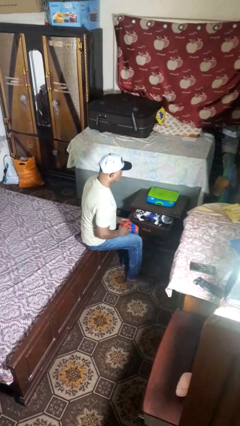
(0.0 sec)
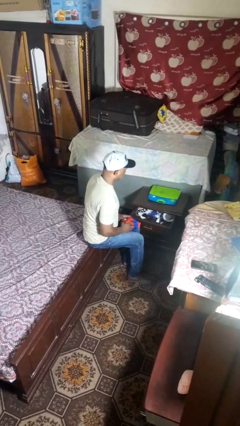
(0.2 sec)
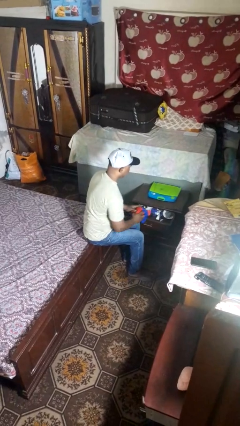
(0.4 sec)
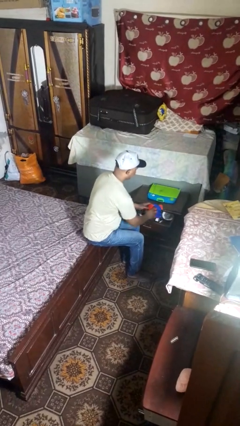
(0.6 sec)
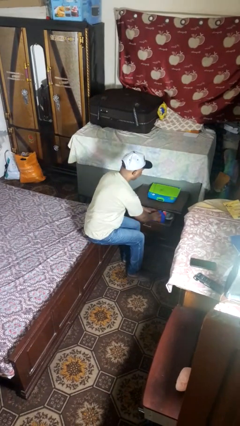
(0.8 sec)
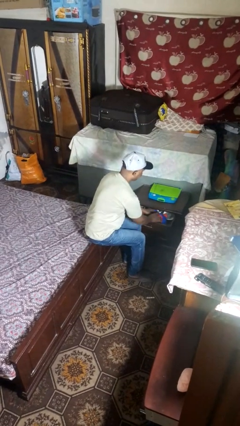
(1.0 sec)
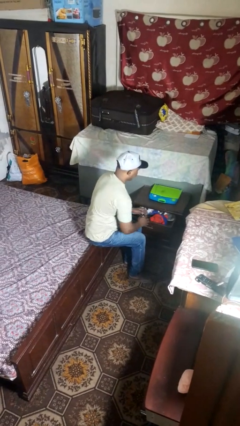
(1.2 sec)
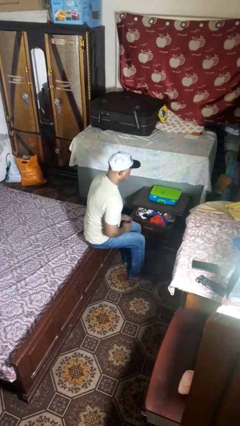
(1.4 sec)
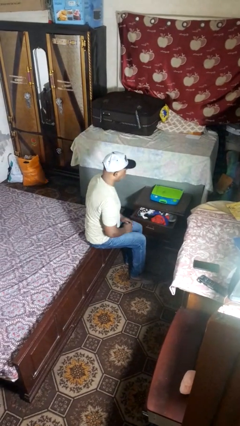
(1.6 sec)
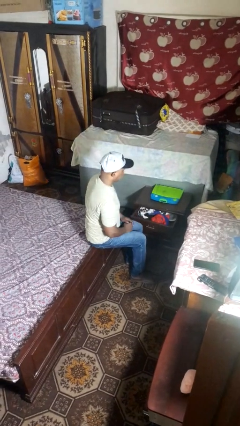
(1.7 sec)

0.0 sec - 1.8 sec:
person puts clothes into dresser

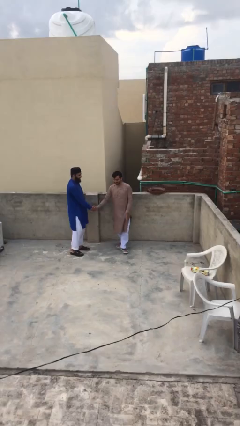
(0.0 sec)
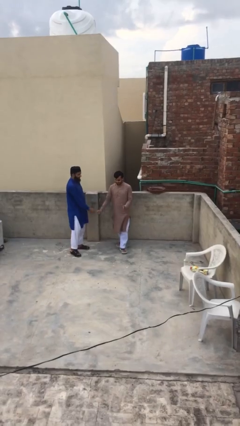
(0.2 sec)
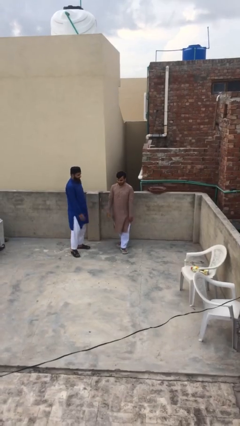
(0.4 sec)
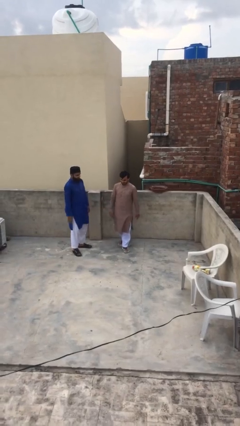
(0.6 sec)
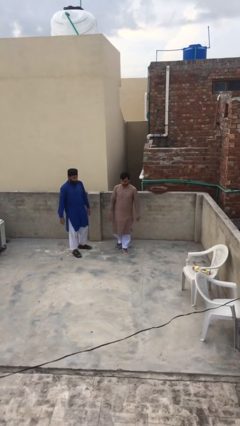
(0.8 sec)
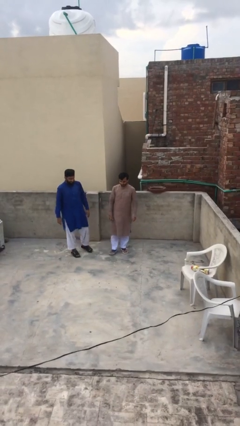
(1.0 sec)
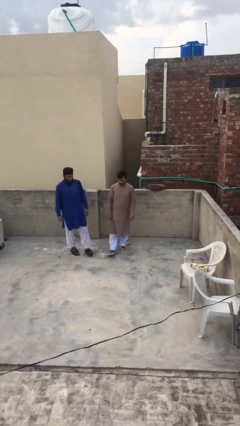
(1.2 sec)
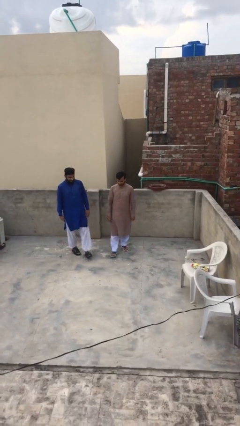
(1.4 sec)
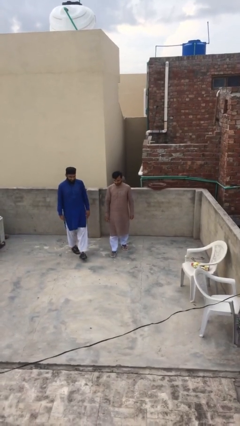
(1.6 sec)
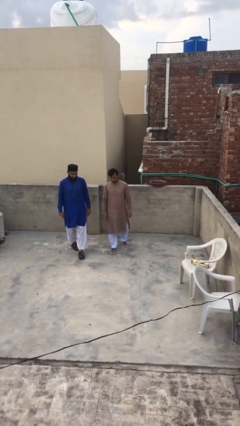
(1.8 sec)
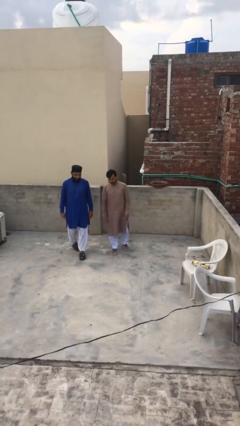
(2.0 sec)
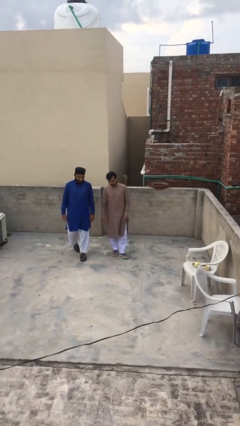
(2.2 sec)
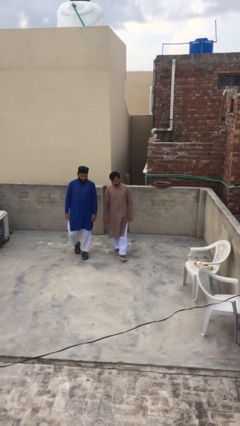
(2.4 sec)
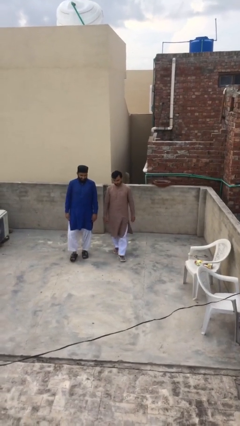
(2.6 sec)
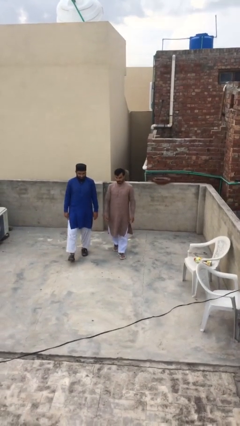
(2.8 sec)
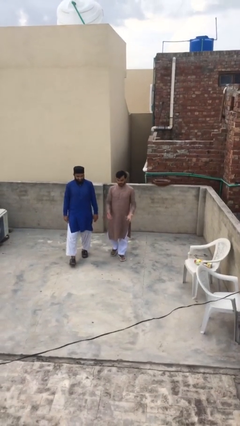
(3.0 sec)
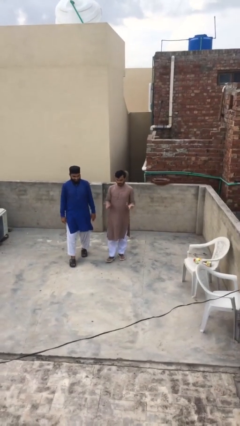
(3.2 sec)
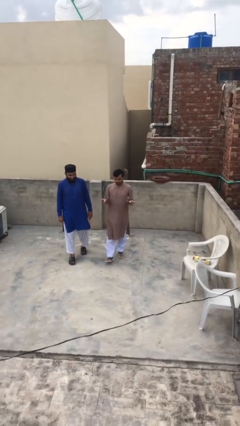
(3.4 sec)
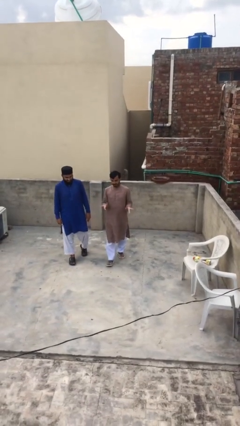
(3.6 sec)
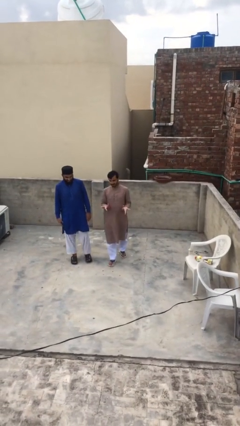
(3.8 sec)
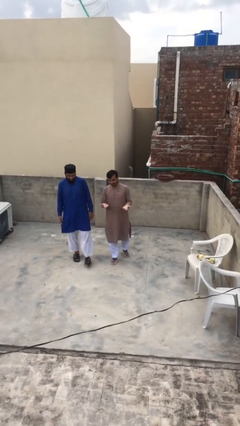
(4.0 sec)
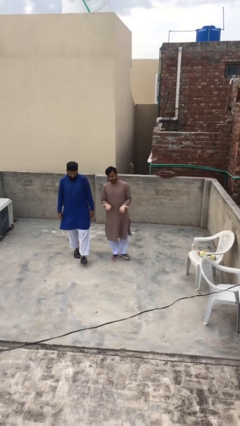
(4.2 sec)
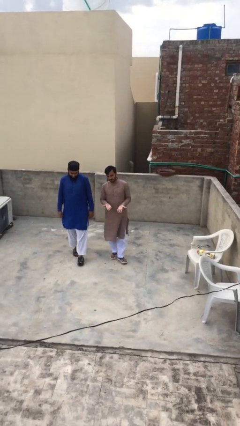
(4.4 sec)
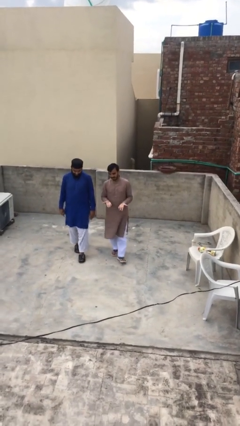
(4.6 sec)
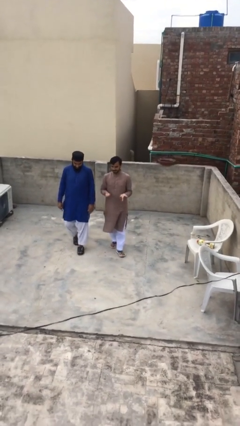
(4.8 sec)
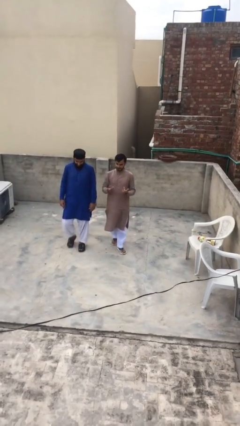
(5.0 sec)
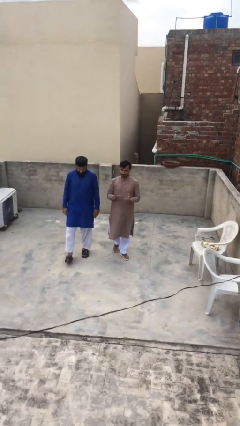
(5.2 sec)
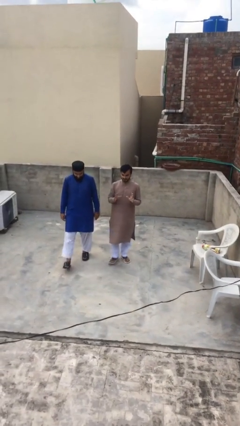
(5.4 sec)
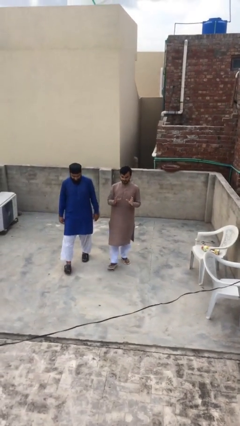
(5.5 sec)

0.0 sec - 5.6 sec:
person talks to person

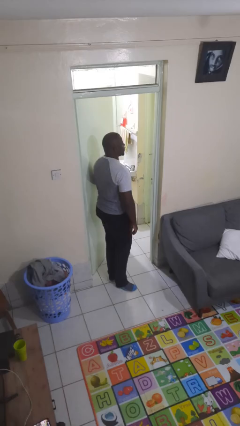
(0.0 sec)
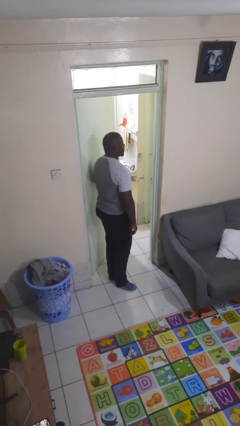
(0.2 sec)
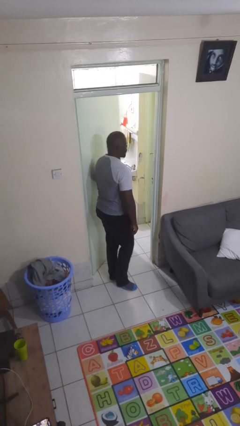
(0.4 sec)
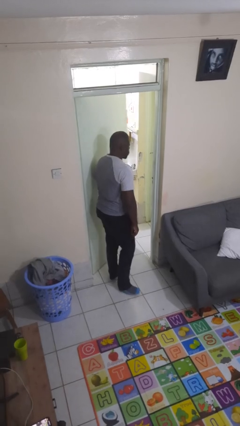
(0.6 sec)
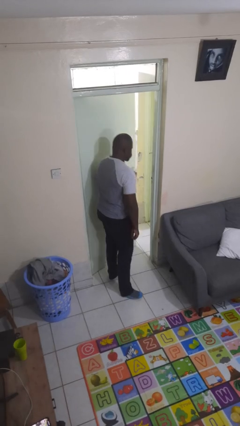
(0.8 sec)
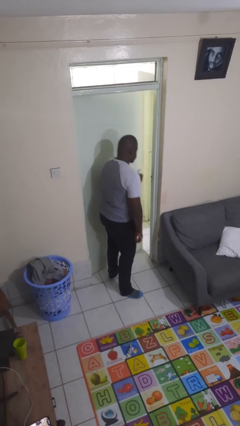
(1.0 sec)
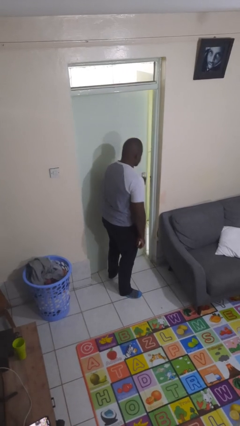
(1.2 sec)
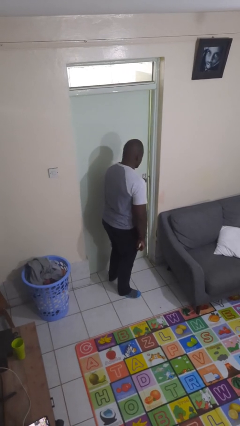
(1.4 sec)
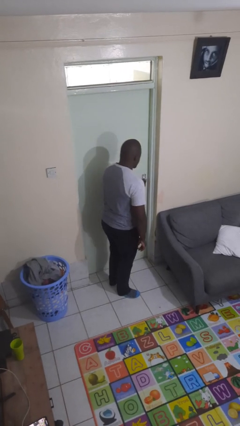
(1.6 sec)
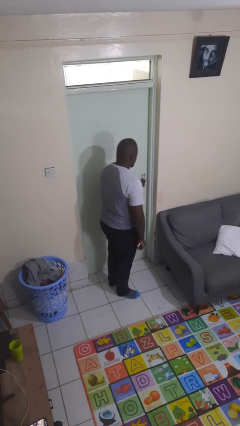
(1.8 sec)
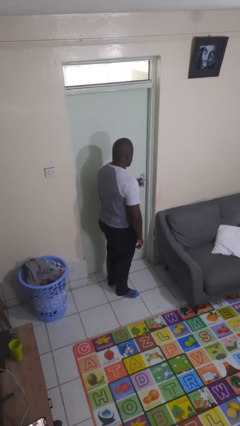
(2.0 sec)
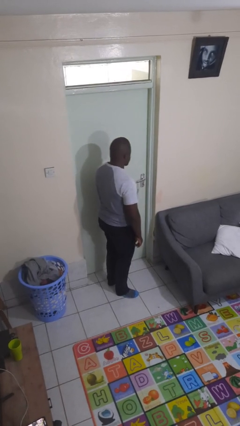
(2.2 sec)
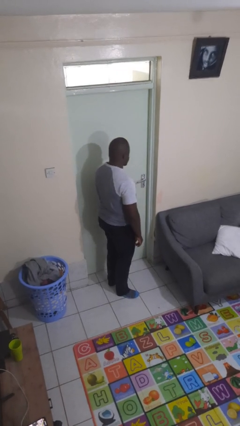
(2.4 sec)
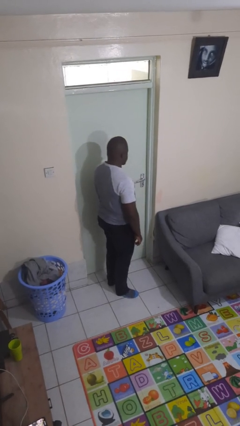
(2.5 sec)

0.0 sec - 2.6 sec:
person closes facility door

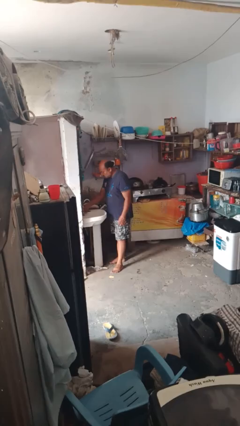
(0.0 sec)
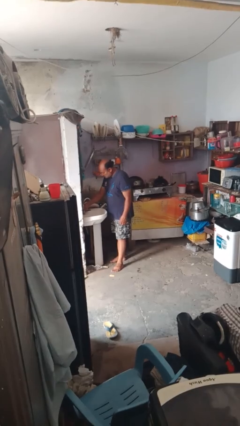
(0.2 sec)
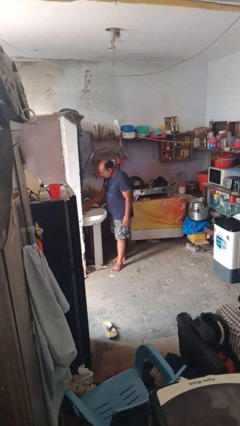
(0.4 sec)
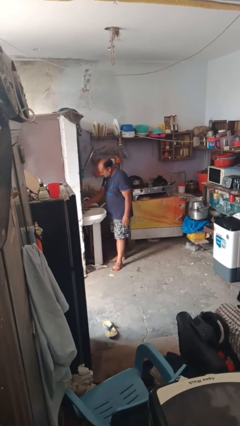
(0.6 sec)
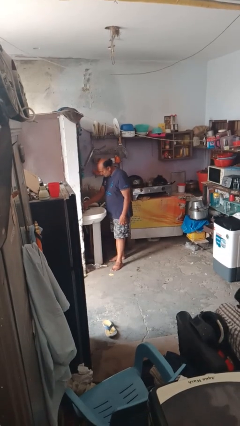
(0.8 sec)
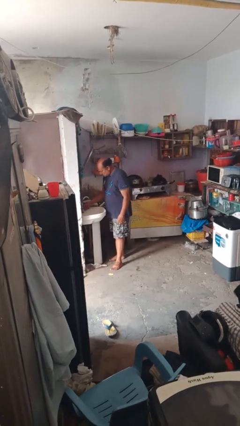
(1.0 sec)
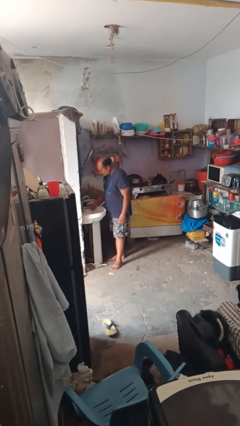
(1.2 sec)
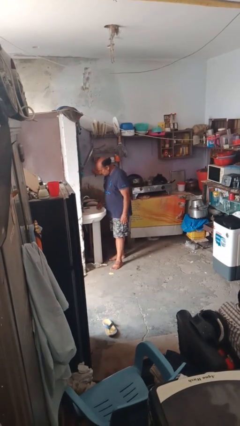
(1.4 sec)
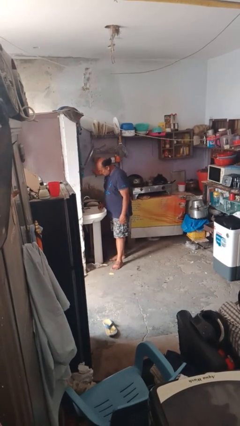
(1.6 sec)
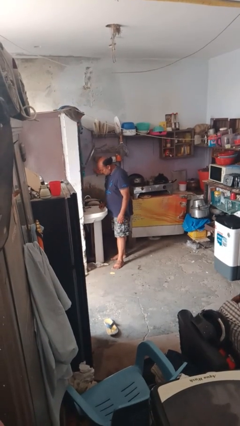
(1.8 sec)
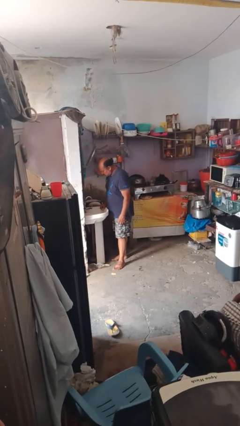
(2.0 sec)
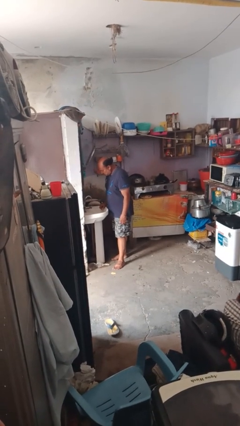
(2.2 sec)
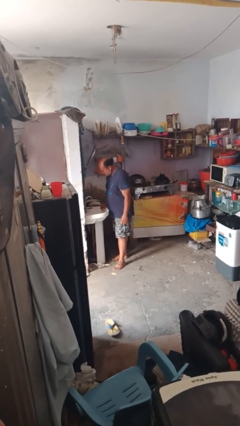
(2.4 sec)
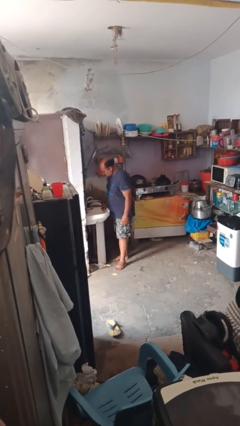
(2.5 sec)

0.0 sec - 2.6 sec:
person turns on faucet

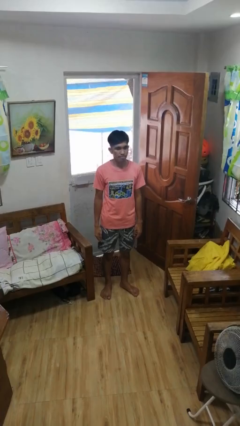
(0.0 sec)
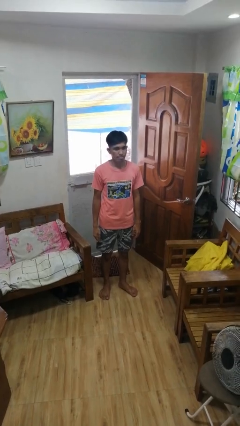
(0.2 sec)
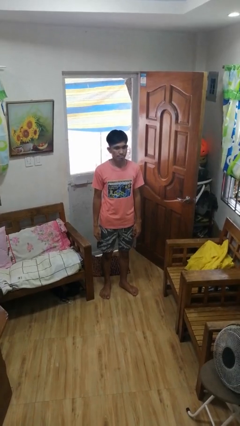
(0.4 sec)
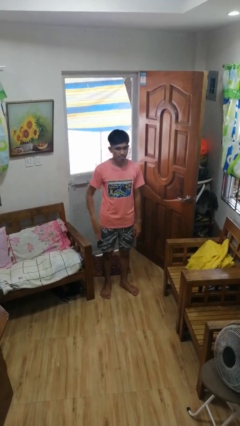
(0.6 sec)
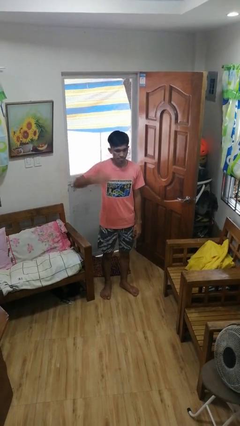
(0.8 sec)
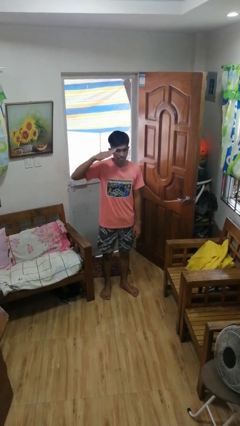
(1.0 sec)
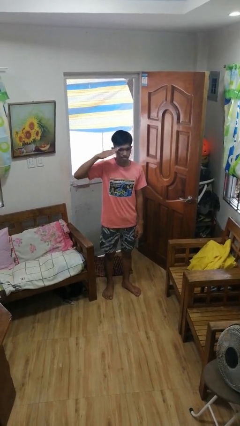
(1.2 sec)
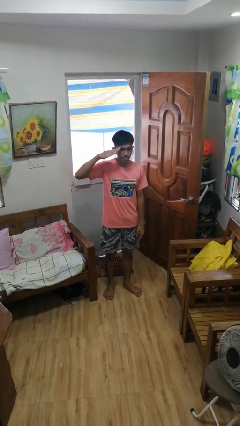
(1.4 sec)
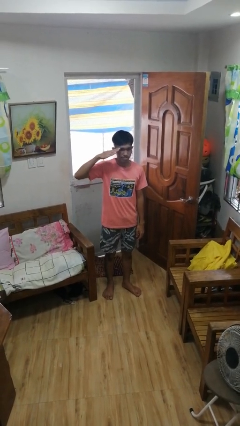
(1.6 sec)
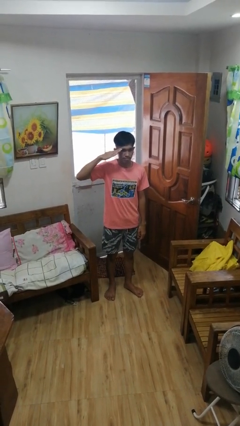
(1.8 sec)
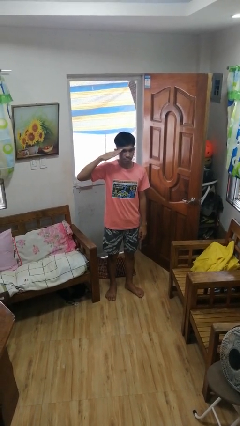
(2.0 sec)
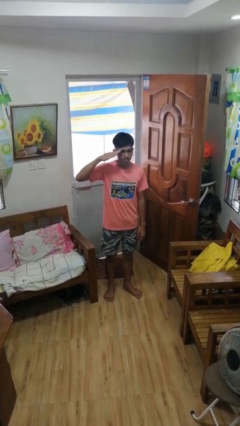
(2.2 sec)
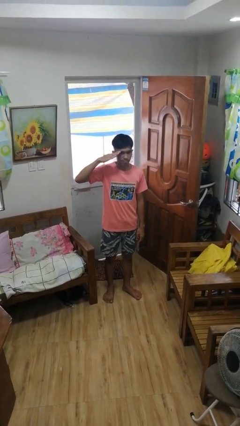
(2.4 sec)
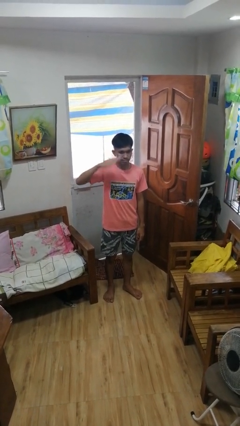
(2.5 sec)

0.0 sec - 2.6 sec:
person salutes

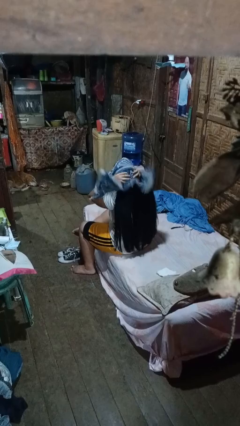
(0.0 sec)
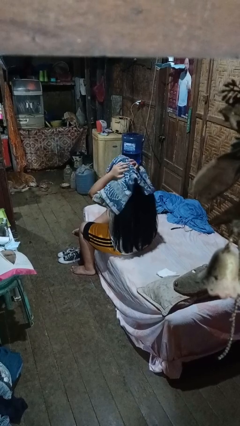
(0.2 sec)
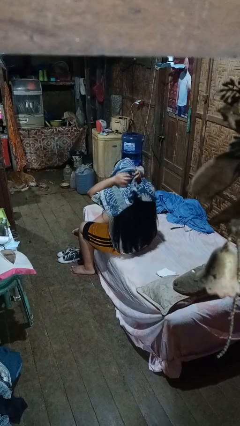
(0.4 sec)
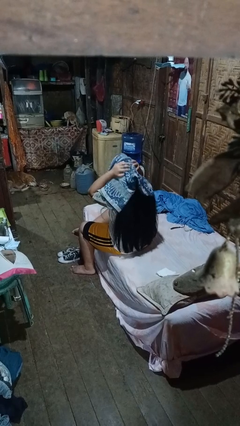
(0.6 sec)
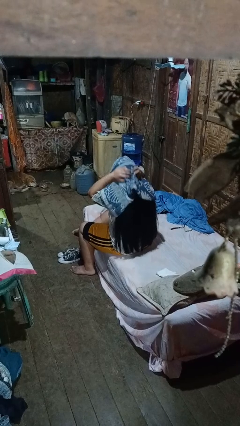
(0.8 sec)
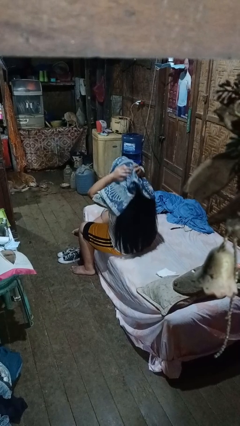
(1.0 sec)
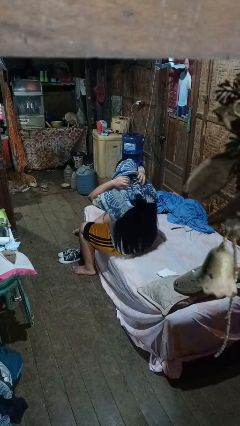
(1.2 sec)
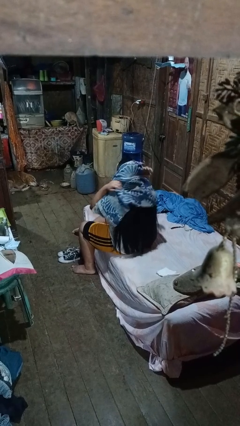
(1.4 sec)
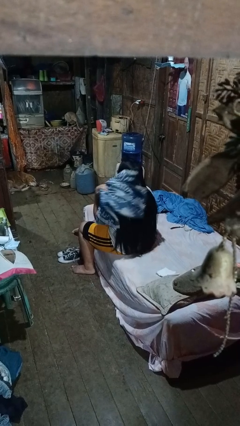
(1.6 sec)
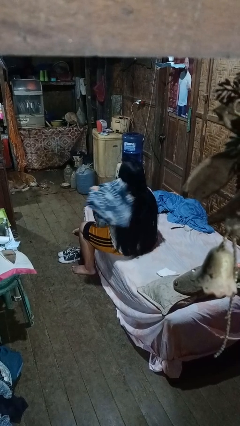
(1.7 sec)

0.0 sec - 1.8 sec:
person dries hair with towel
